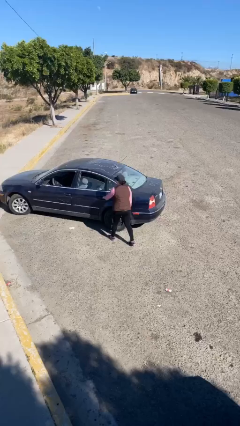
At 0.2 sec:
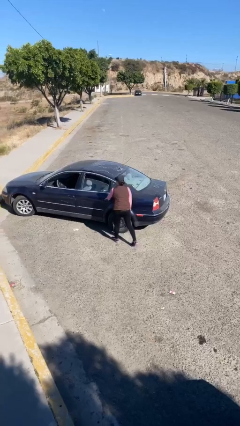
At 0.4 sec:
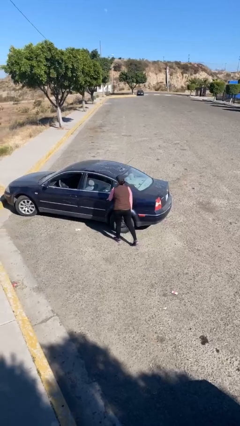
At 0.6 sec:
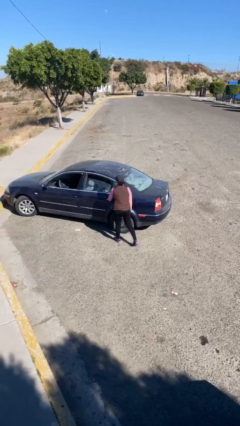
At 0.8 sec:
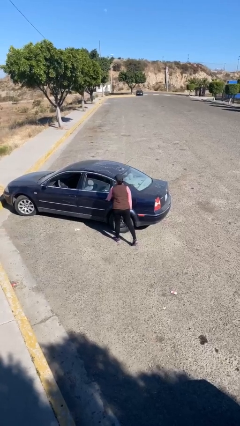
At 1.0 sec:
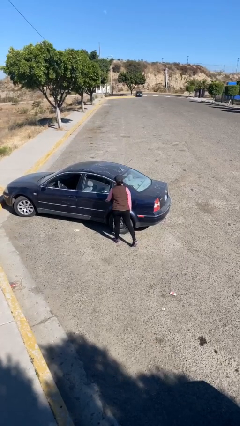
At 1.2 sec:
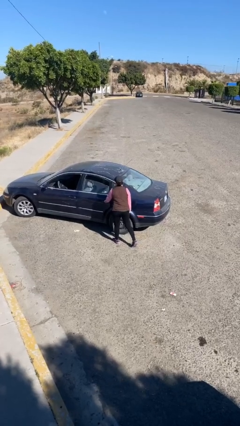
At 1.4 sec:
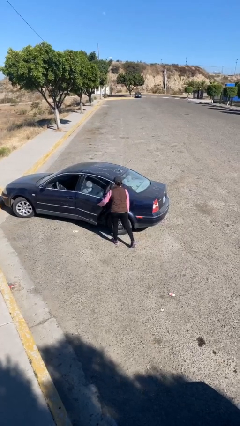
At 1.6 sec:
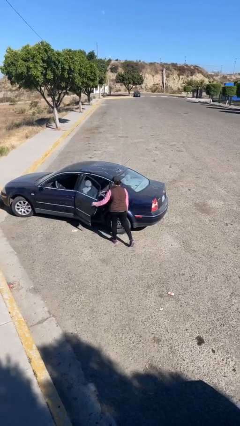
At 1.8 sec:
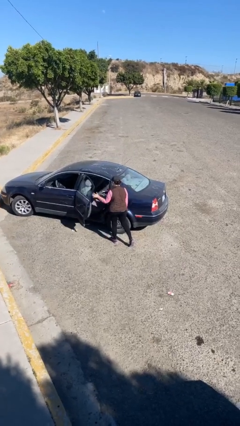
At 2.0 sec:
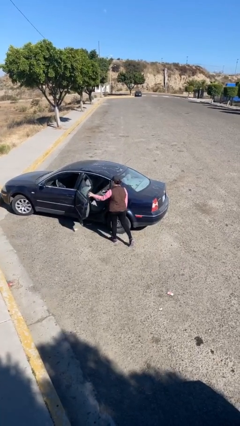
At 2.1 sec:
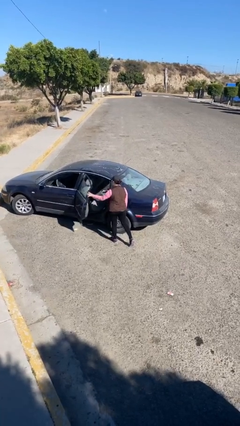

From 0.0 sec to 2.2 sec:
person opens car door

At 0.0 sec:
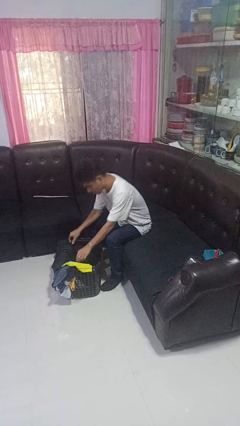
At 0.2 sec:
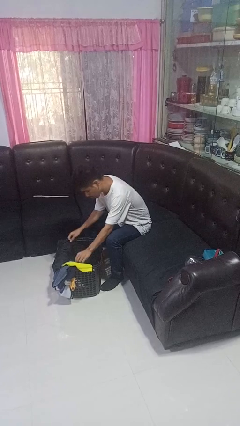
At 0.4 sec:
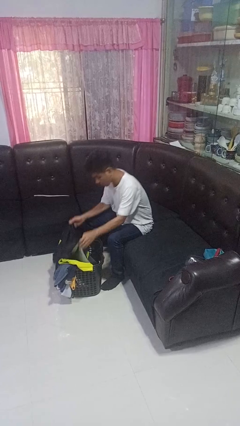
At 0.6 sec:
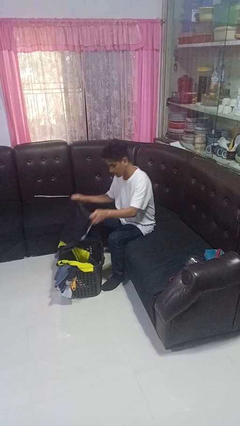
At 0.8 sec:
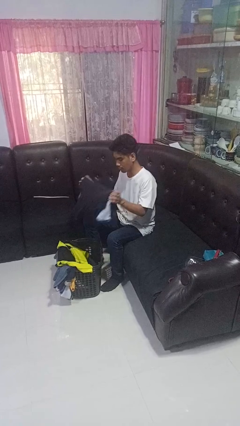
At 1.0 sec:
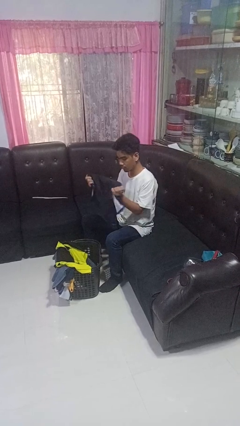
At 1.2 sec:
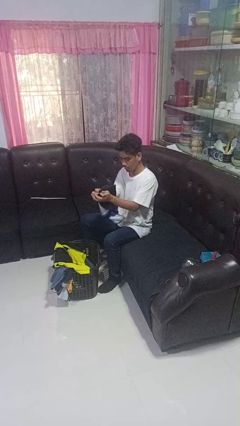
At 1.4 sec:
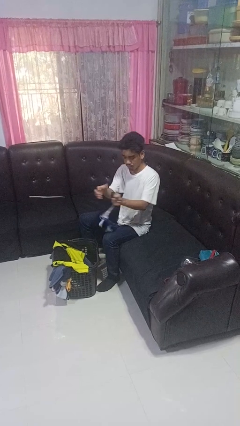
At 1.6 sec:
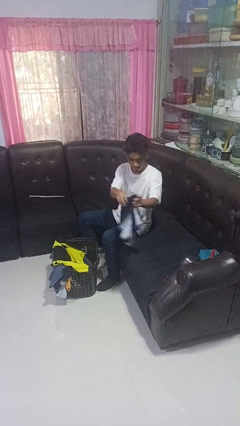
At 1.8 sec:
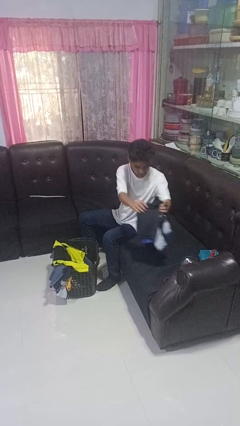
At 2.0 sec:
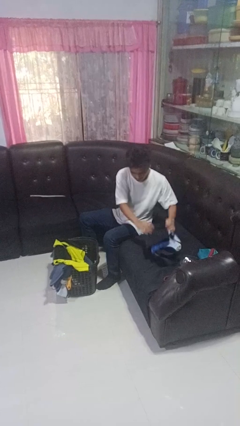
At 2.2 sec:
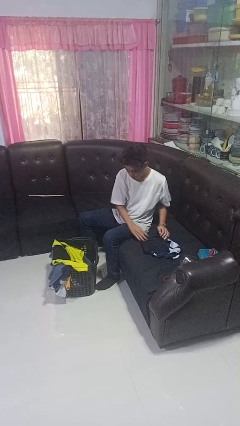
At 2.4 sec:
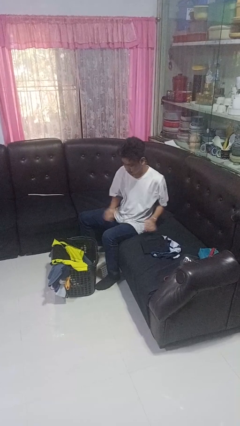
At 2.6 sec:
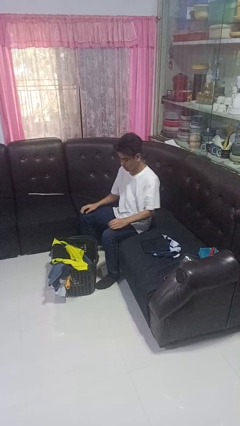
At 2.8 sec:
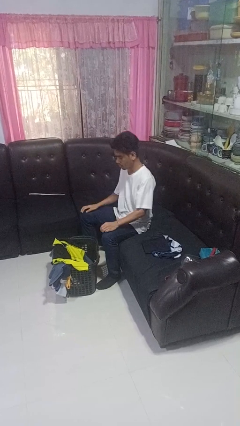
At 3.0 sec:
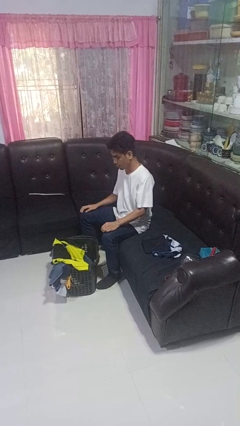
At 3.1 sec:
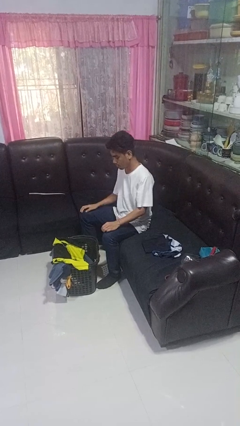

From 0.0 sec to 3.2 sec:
person folds shirt

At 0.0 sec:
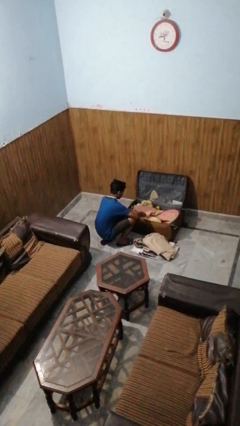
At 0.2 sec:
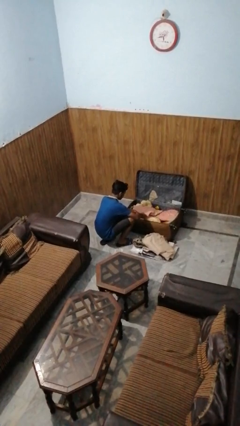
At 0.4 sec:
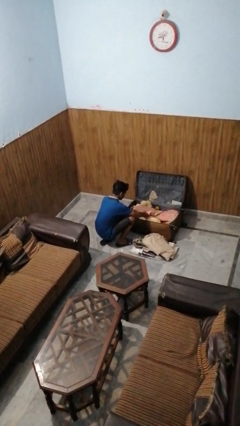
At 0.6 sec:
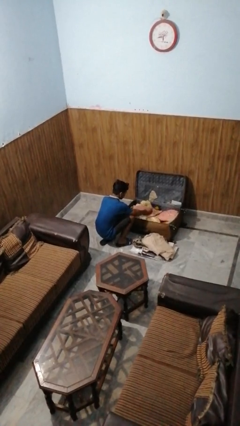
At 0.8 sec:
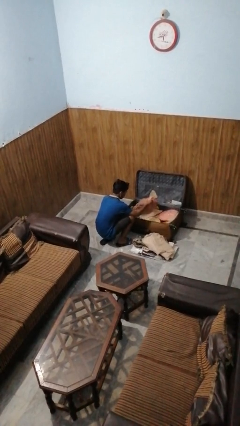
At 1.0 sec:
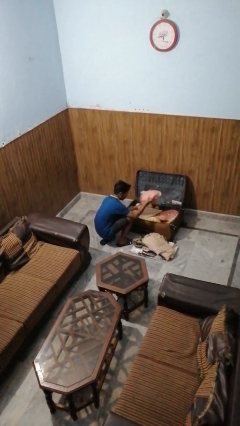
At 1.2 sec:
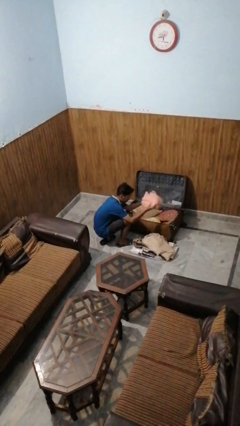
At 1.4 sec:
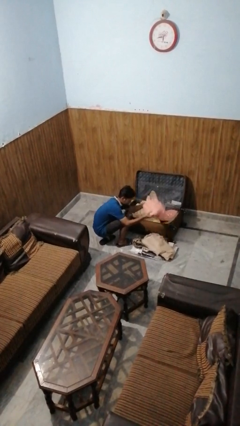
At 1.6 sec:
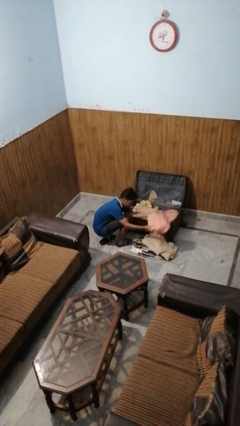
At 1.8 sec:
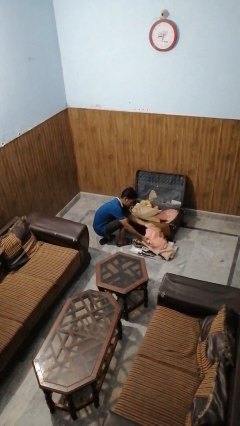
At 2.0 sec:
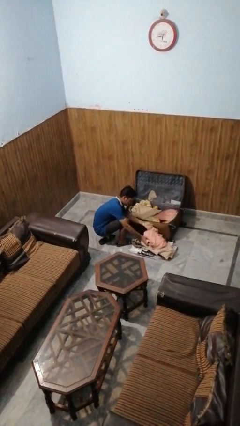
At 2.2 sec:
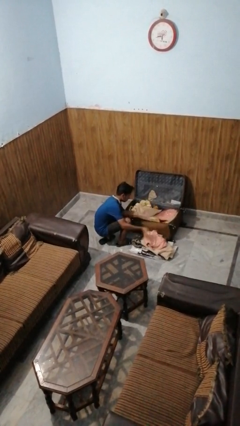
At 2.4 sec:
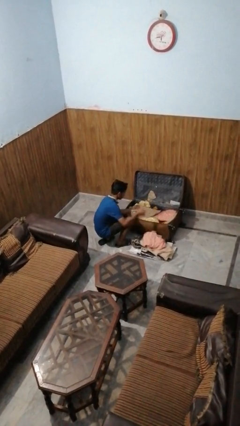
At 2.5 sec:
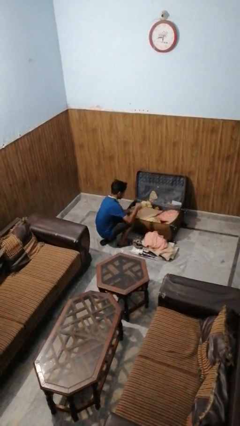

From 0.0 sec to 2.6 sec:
person unloads clothes from suitcase
